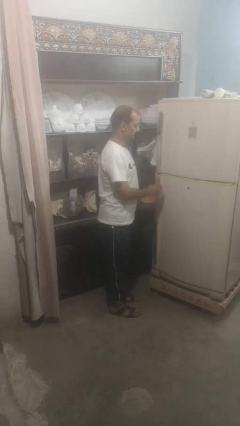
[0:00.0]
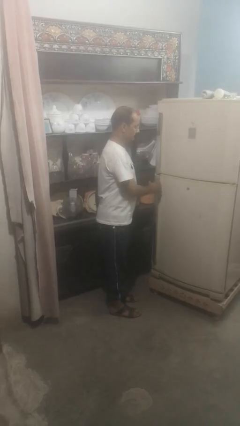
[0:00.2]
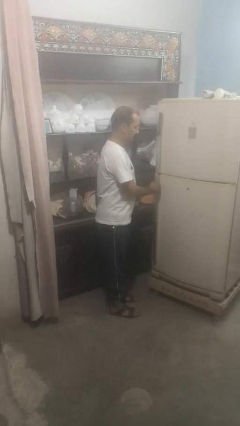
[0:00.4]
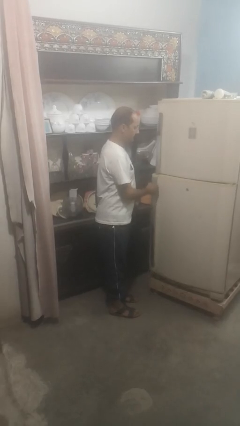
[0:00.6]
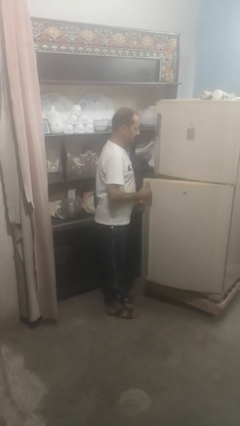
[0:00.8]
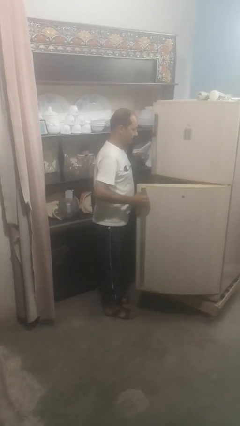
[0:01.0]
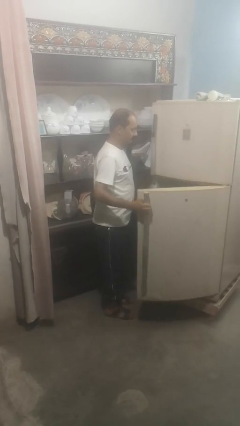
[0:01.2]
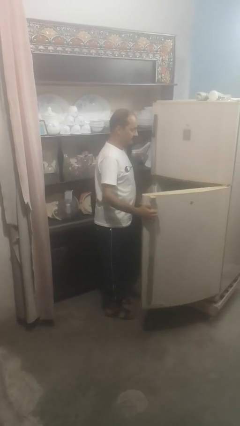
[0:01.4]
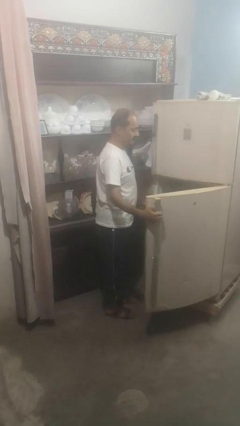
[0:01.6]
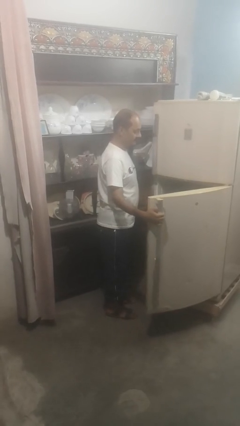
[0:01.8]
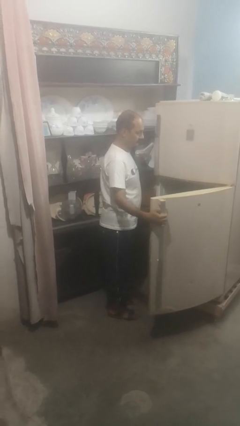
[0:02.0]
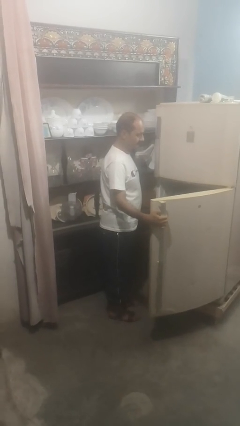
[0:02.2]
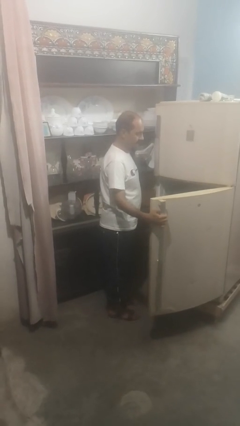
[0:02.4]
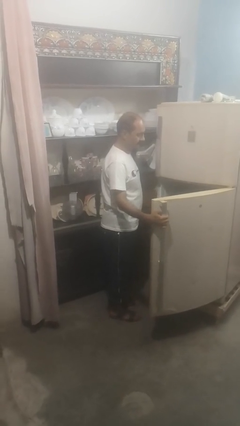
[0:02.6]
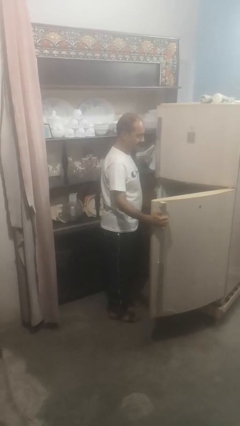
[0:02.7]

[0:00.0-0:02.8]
person opens refrigerator

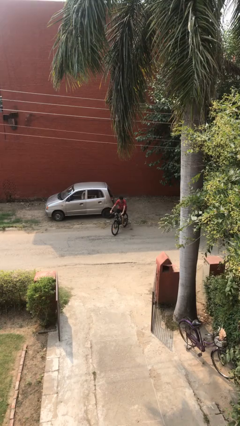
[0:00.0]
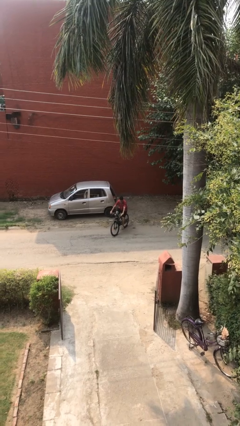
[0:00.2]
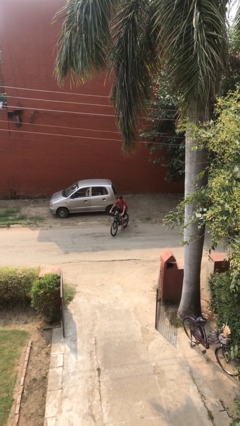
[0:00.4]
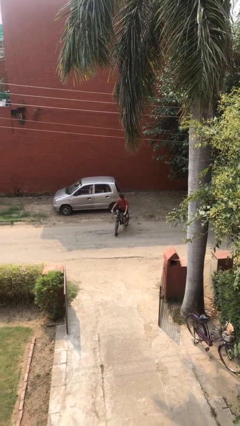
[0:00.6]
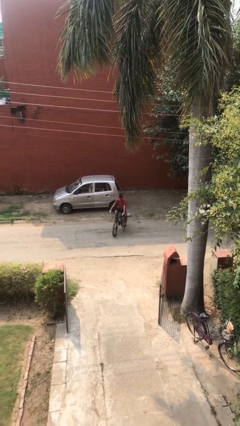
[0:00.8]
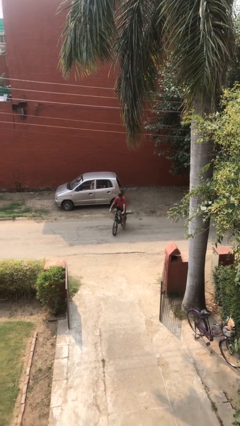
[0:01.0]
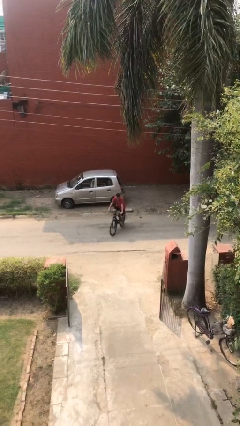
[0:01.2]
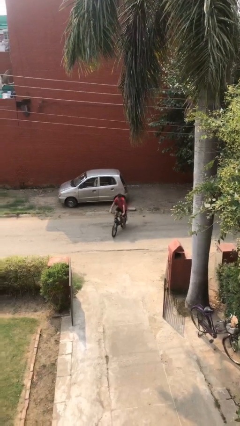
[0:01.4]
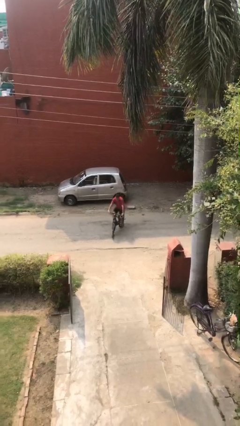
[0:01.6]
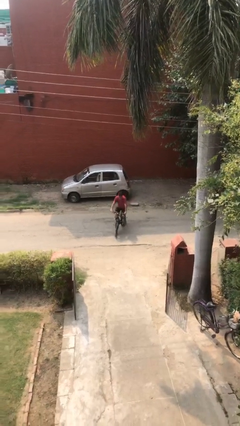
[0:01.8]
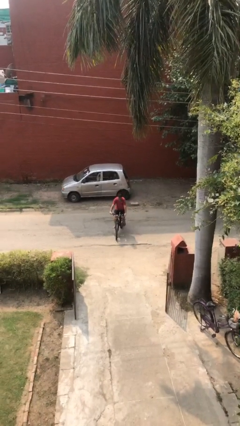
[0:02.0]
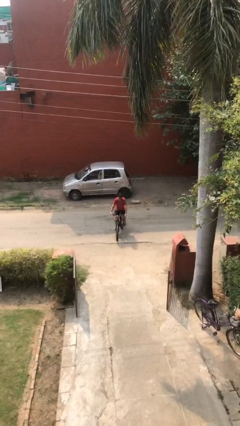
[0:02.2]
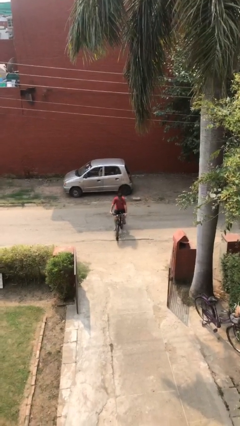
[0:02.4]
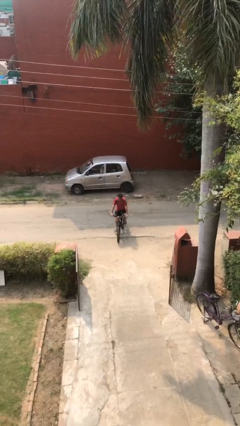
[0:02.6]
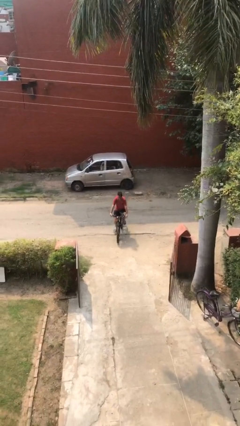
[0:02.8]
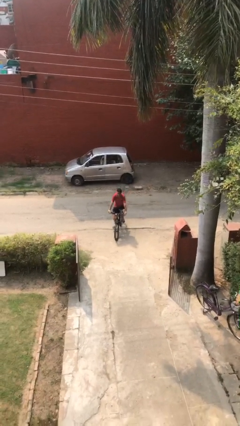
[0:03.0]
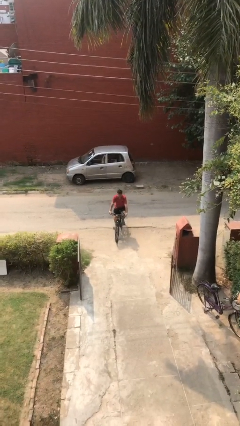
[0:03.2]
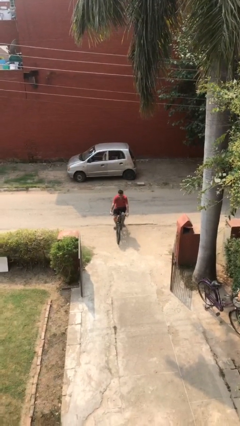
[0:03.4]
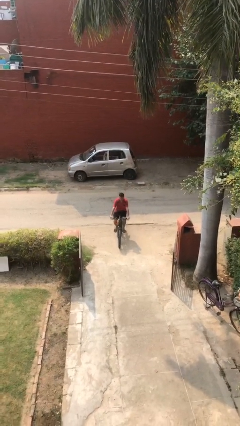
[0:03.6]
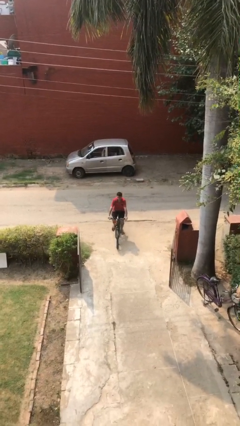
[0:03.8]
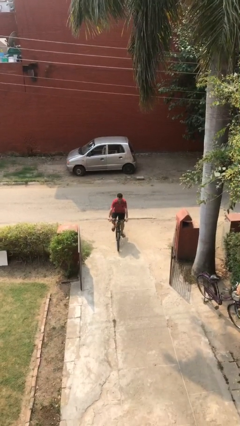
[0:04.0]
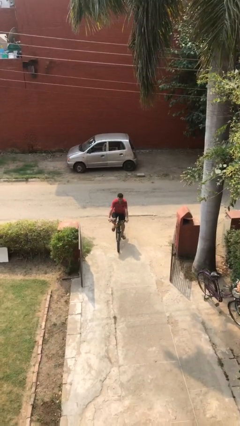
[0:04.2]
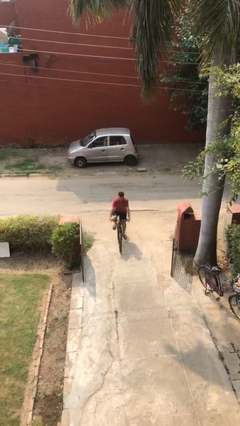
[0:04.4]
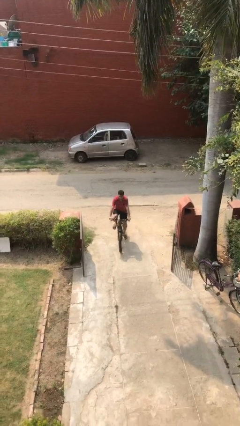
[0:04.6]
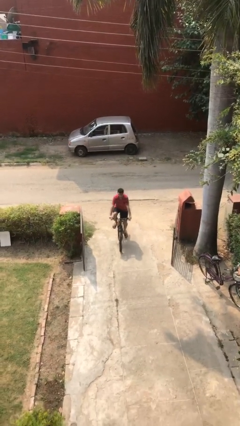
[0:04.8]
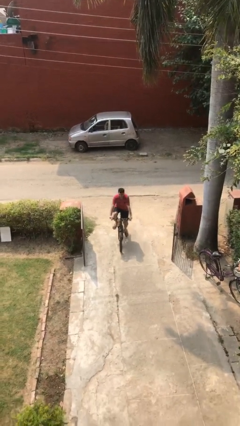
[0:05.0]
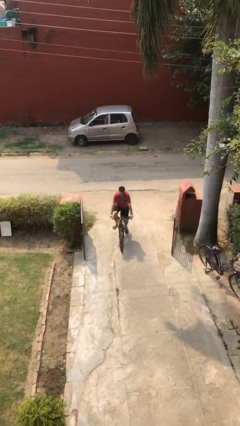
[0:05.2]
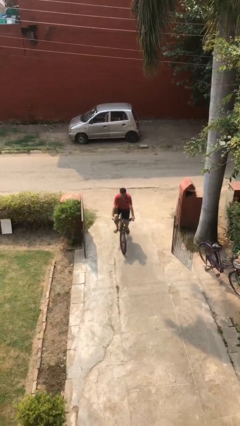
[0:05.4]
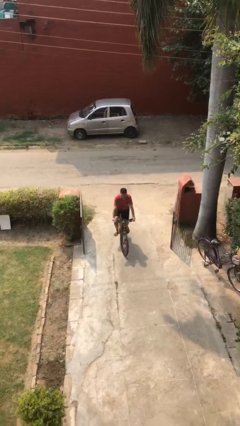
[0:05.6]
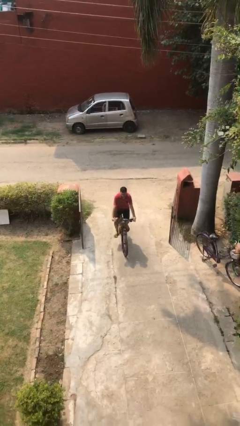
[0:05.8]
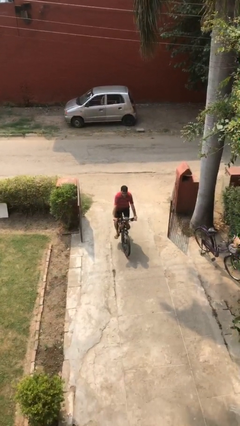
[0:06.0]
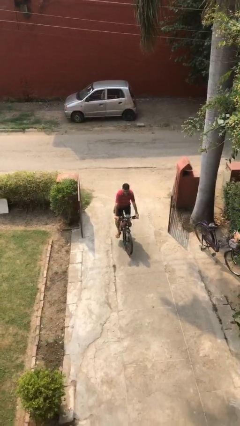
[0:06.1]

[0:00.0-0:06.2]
person rides bicycle

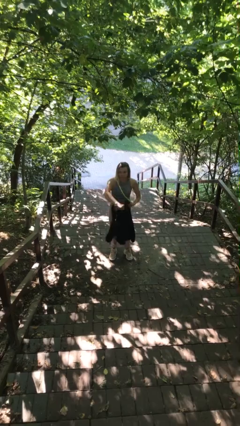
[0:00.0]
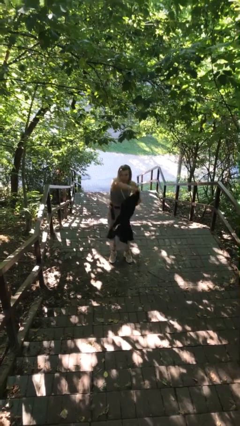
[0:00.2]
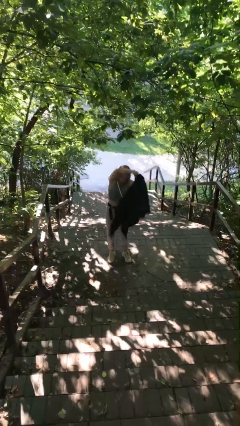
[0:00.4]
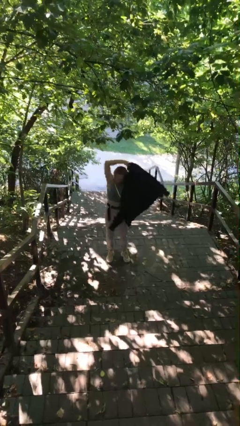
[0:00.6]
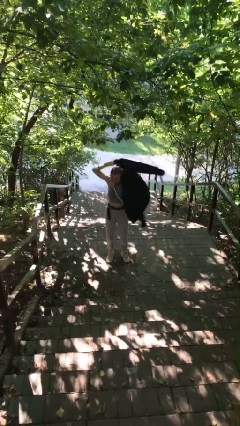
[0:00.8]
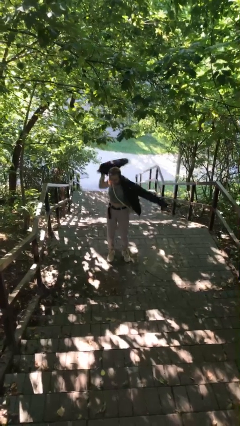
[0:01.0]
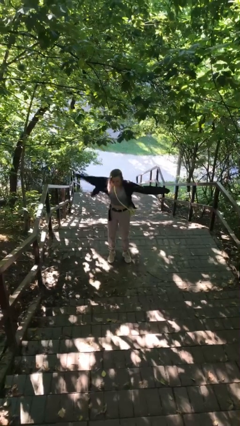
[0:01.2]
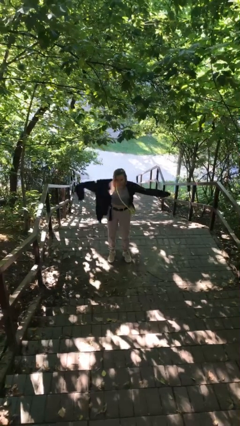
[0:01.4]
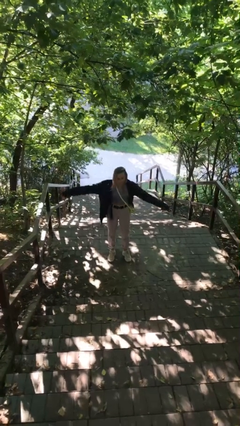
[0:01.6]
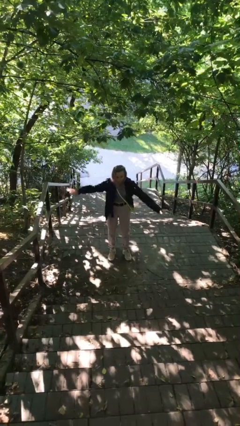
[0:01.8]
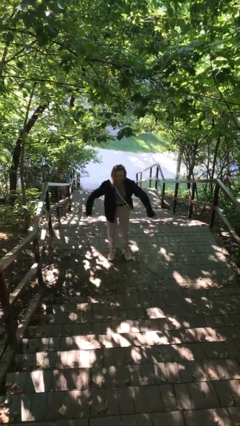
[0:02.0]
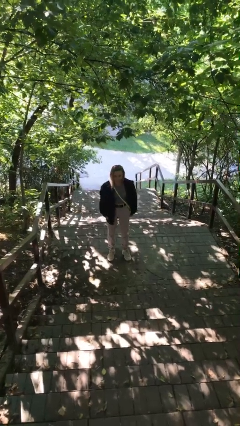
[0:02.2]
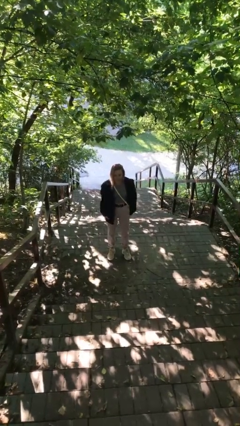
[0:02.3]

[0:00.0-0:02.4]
person puts on jacket

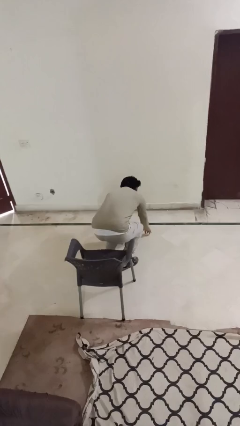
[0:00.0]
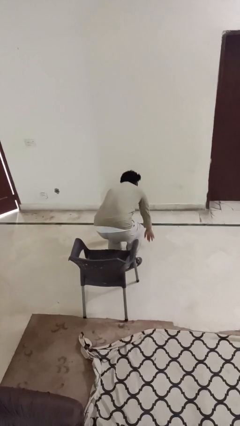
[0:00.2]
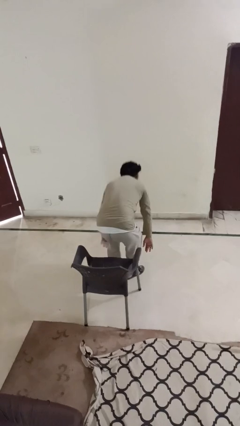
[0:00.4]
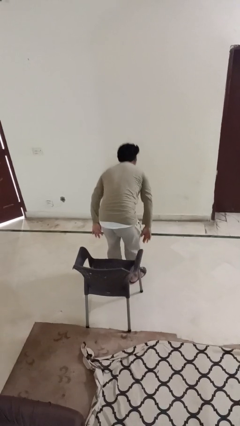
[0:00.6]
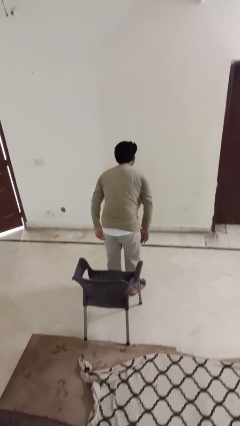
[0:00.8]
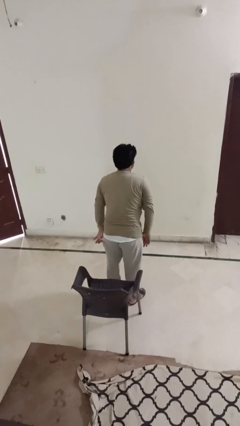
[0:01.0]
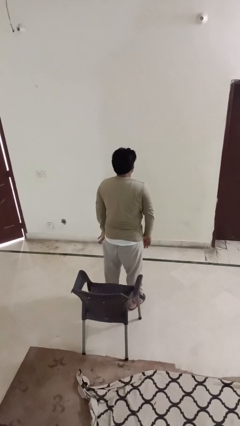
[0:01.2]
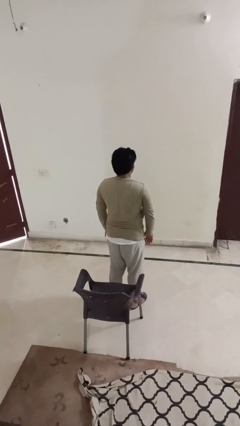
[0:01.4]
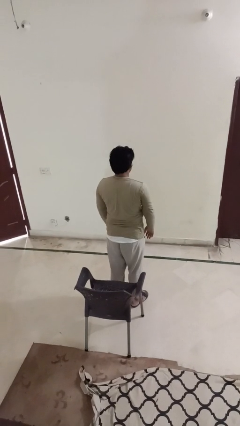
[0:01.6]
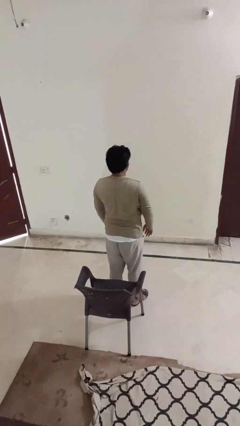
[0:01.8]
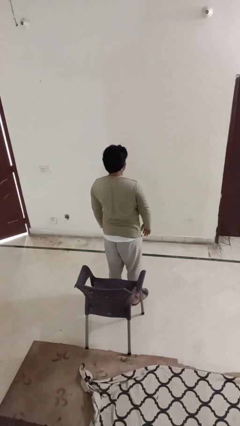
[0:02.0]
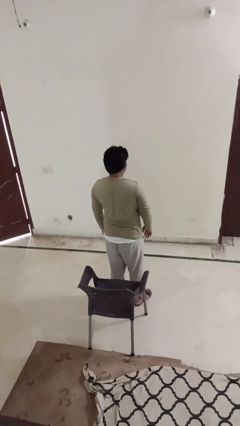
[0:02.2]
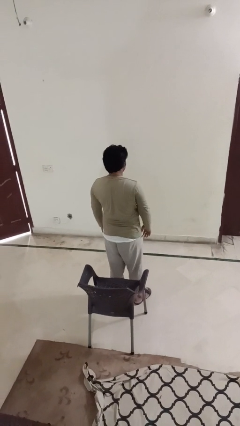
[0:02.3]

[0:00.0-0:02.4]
person stands up from floor

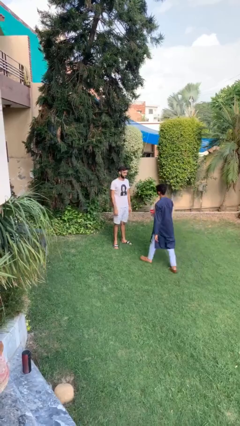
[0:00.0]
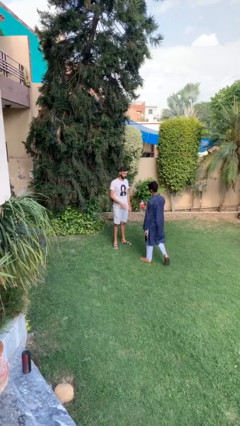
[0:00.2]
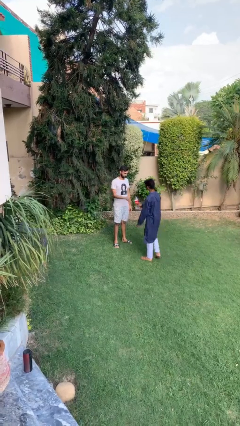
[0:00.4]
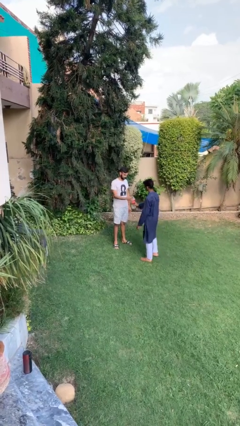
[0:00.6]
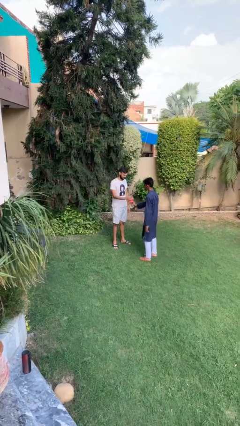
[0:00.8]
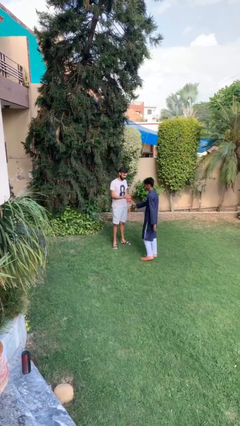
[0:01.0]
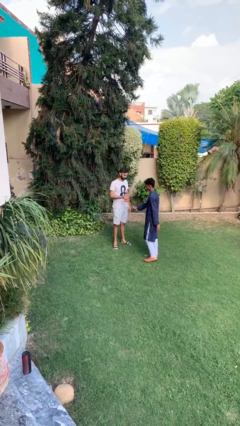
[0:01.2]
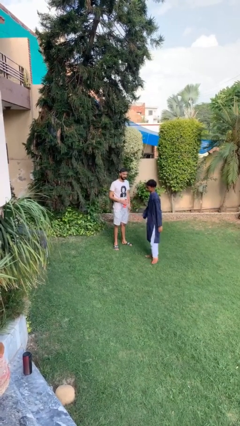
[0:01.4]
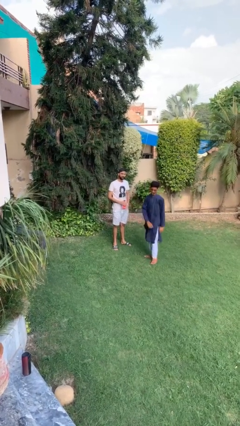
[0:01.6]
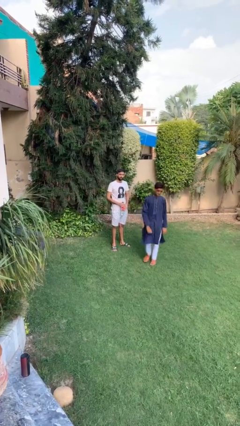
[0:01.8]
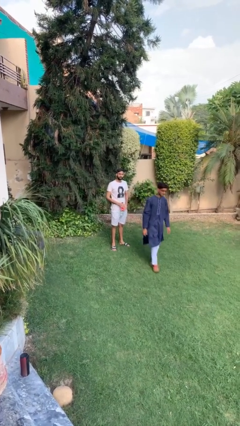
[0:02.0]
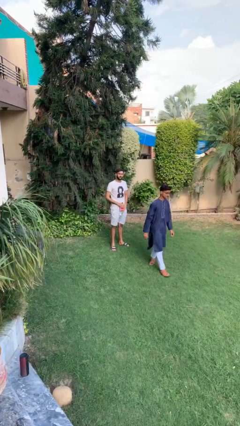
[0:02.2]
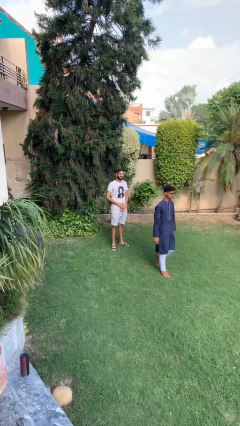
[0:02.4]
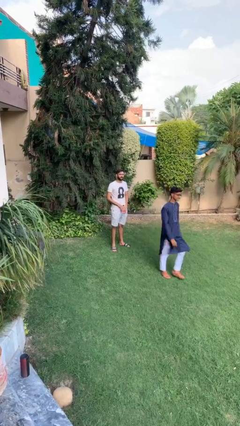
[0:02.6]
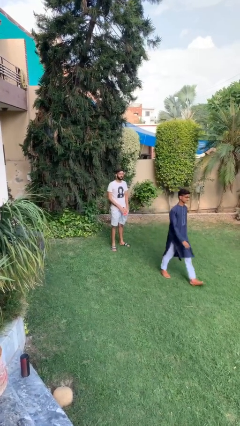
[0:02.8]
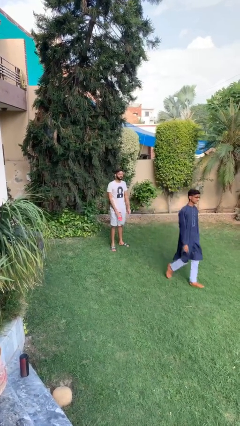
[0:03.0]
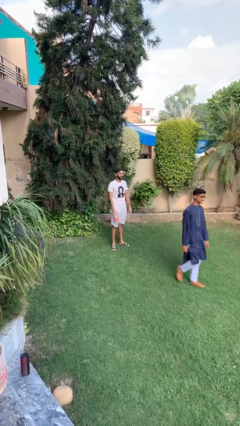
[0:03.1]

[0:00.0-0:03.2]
person transfers object to person

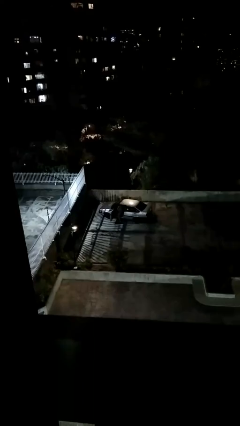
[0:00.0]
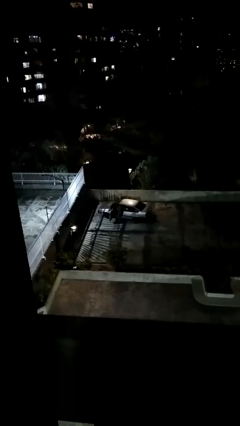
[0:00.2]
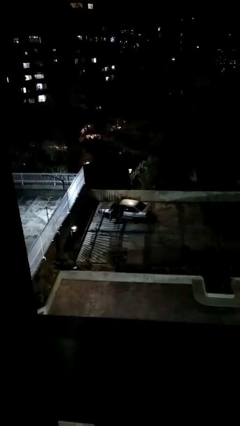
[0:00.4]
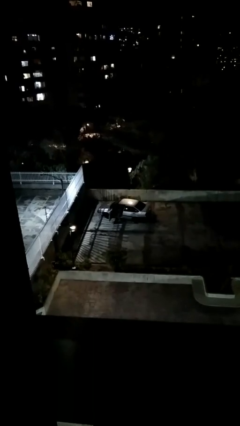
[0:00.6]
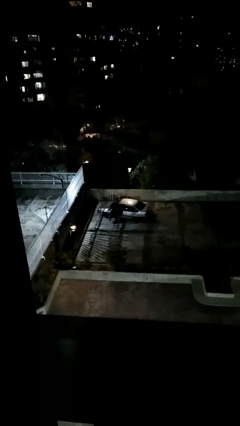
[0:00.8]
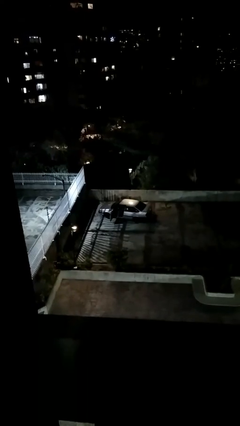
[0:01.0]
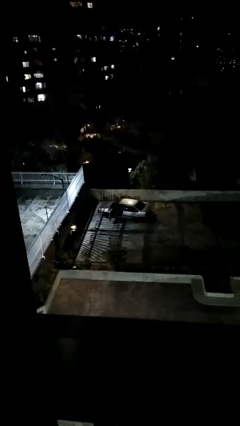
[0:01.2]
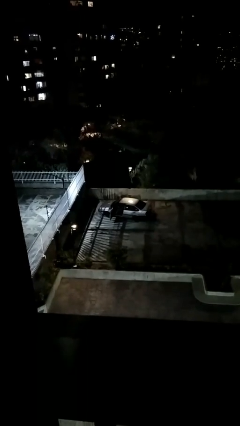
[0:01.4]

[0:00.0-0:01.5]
person enters car
